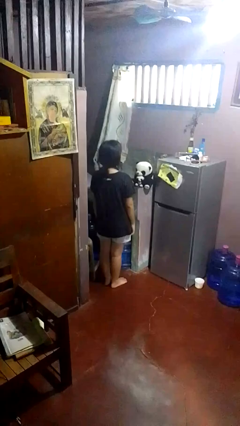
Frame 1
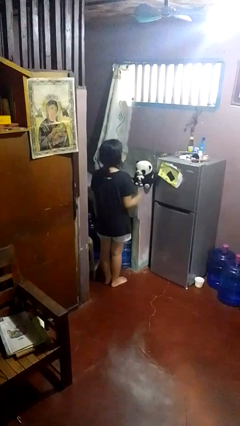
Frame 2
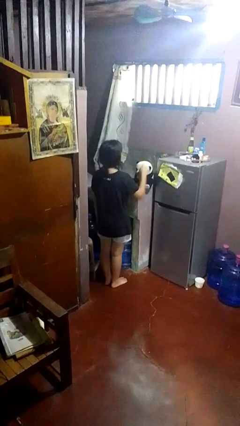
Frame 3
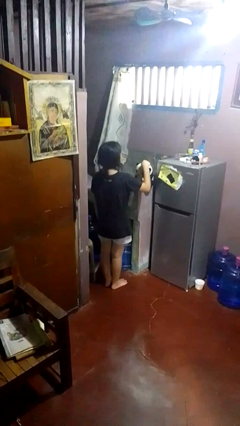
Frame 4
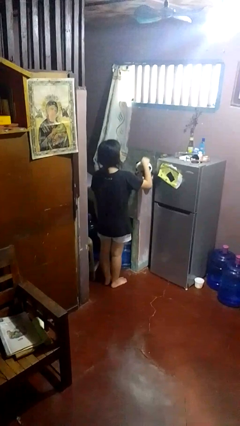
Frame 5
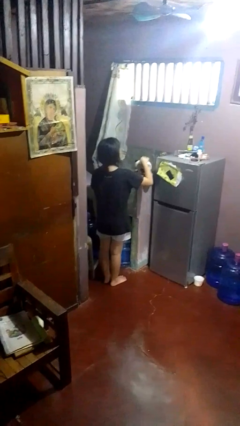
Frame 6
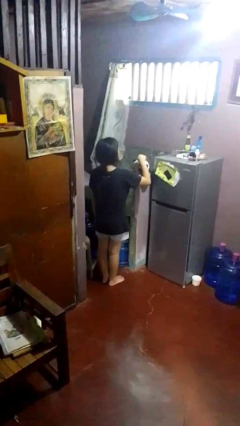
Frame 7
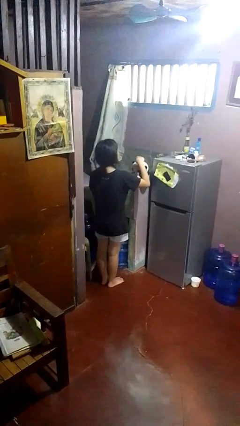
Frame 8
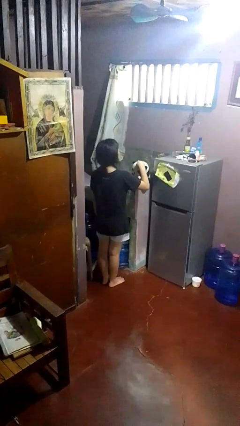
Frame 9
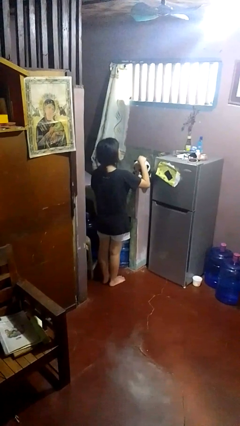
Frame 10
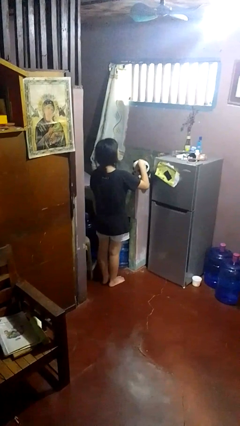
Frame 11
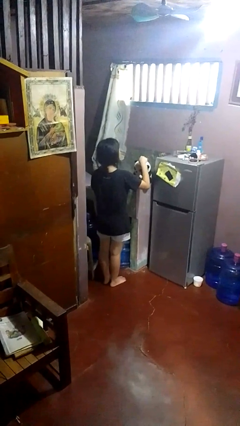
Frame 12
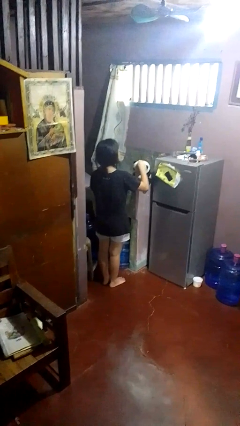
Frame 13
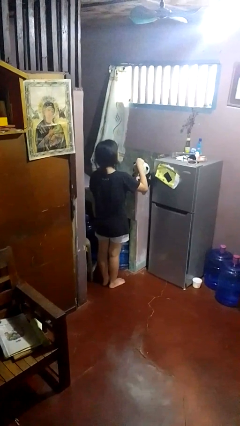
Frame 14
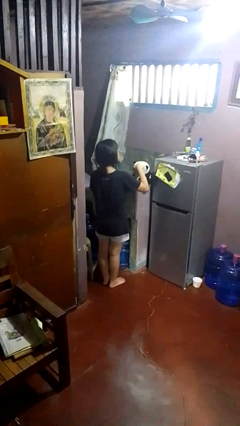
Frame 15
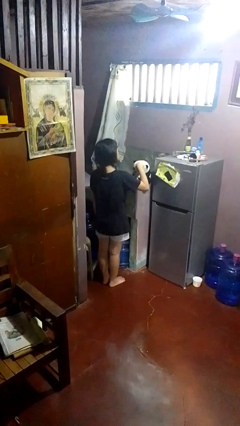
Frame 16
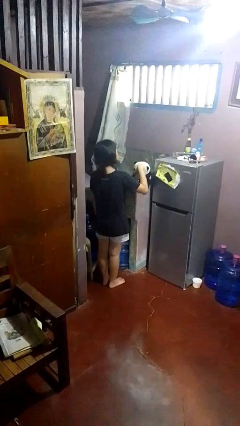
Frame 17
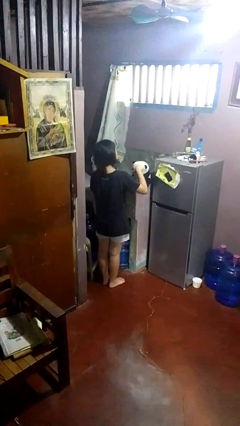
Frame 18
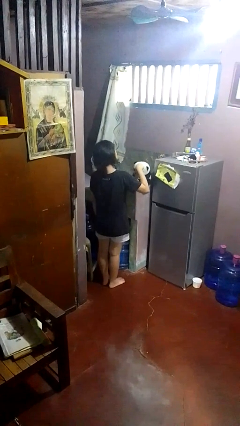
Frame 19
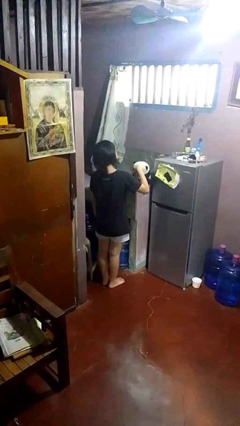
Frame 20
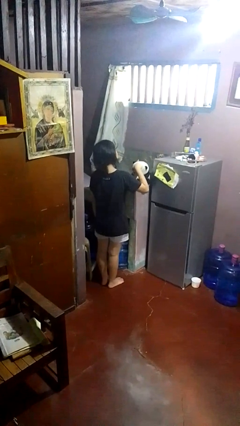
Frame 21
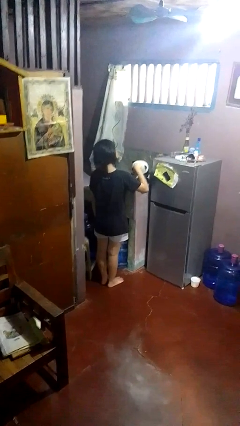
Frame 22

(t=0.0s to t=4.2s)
person taps object with finger

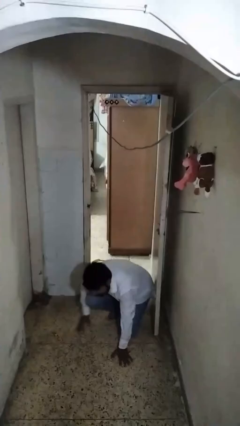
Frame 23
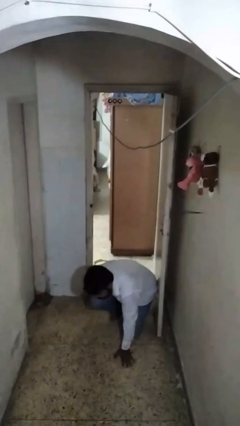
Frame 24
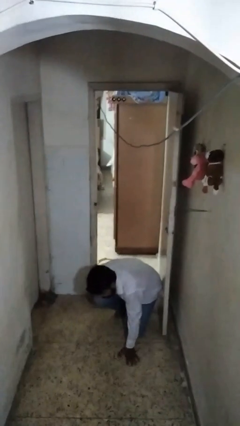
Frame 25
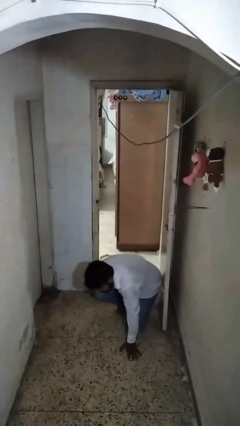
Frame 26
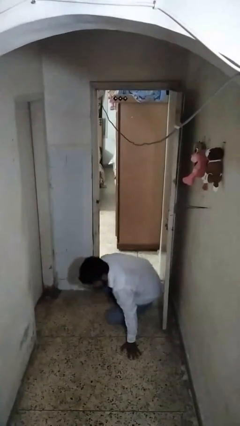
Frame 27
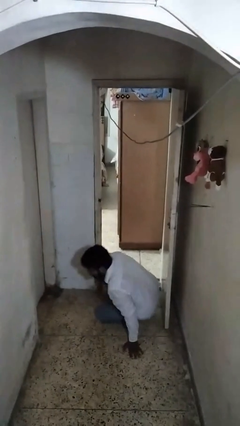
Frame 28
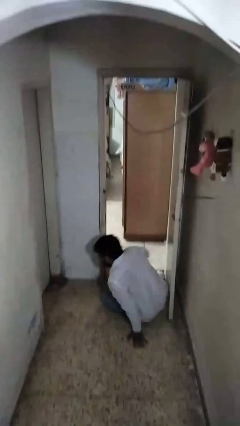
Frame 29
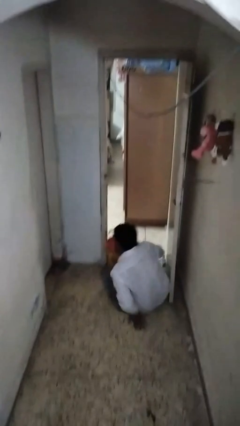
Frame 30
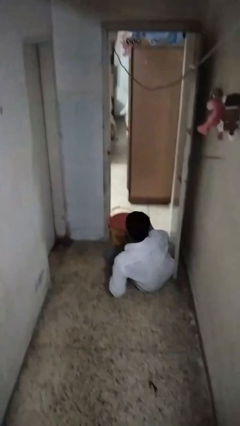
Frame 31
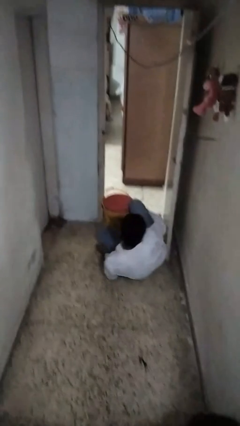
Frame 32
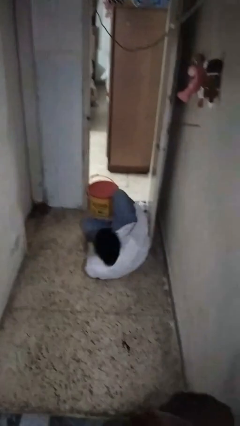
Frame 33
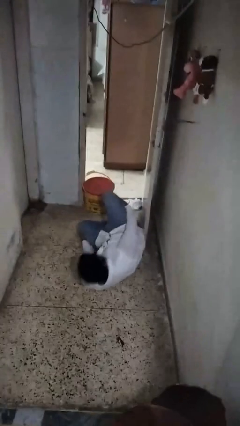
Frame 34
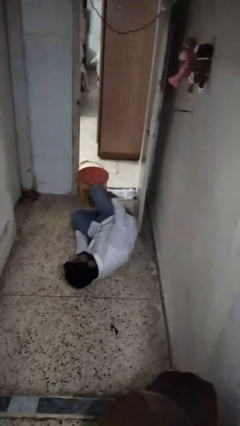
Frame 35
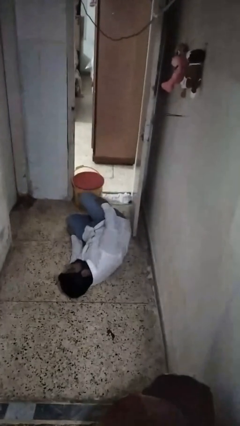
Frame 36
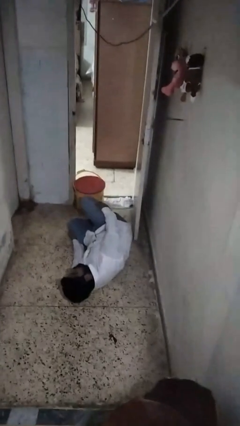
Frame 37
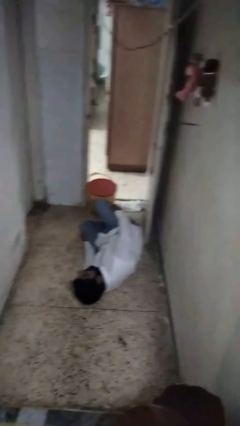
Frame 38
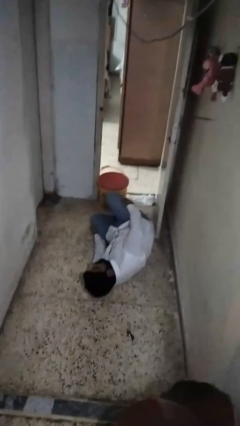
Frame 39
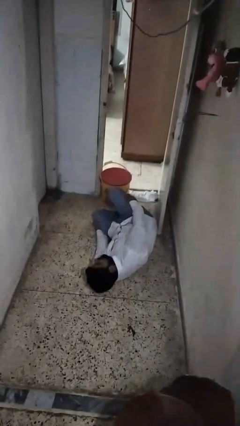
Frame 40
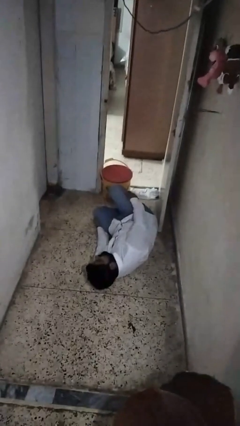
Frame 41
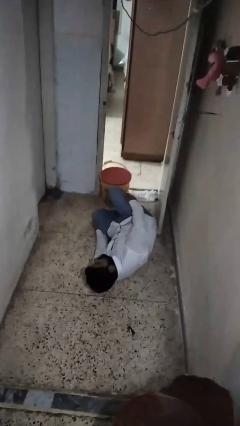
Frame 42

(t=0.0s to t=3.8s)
person lies down on floor

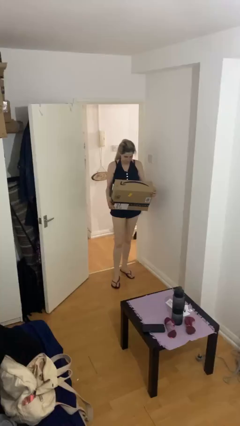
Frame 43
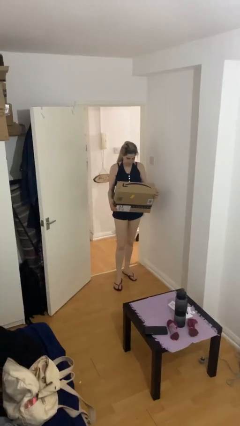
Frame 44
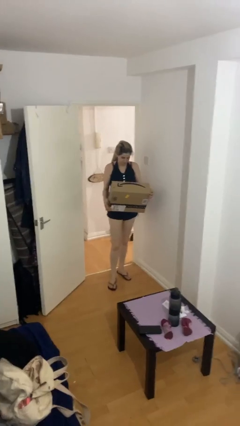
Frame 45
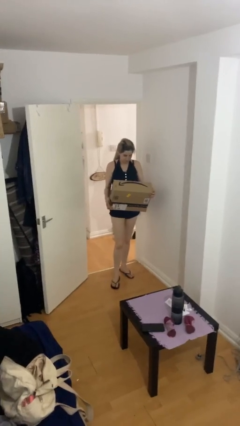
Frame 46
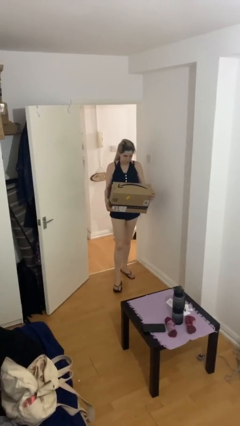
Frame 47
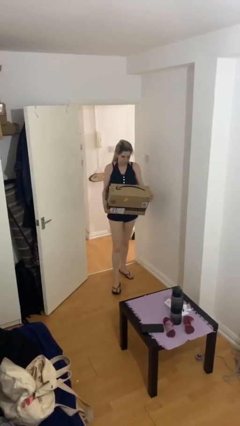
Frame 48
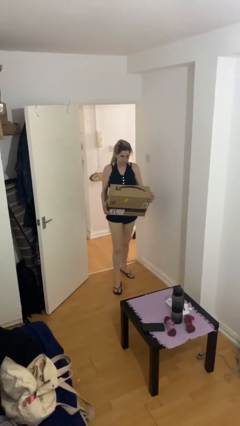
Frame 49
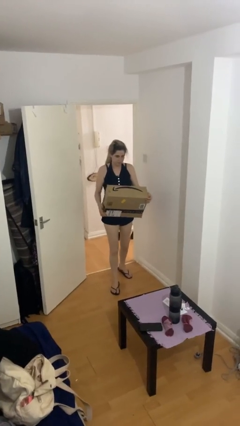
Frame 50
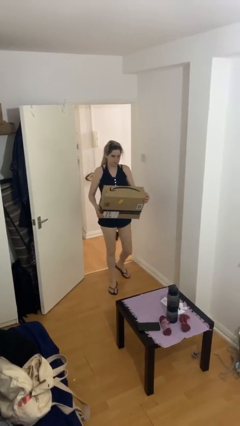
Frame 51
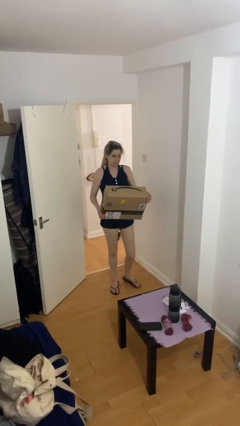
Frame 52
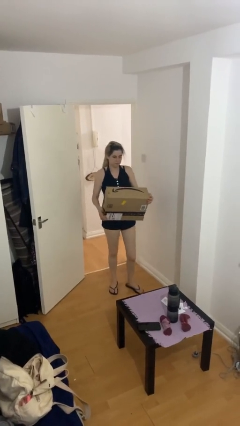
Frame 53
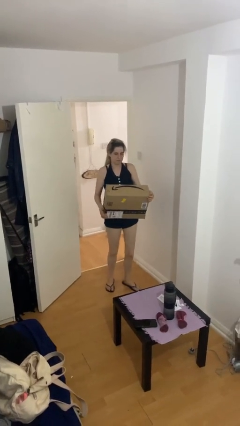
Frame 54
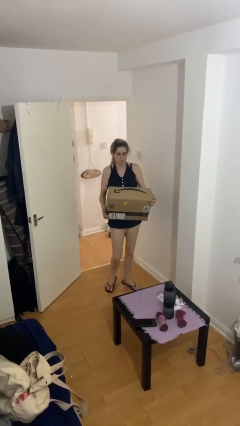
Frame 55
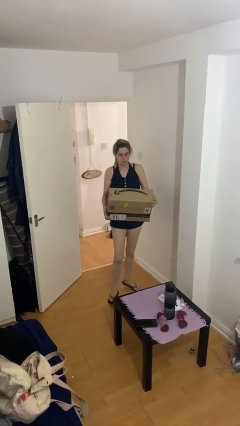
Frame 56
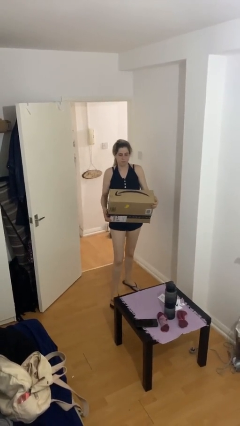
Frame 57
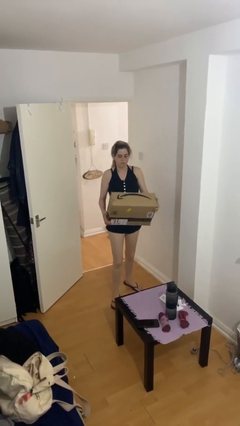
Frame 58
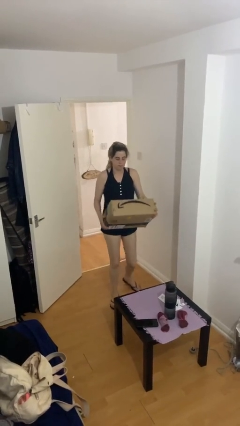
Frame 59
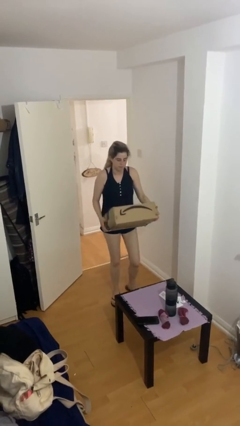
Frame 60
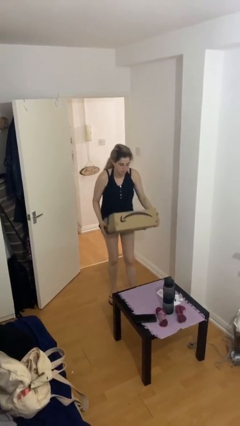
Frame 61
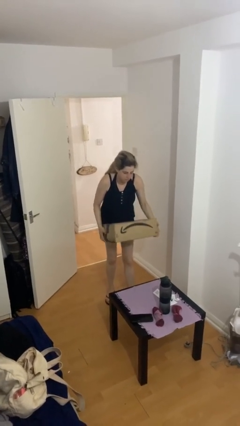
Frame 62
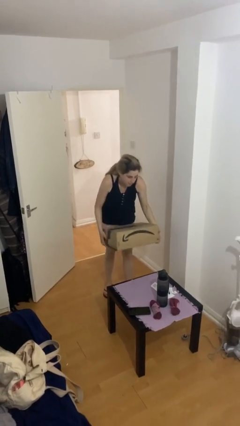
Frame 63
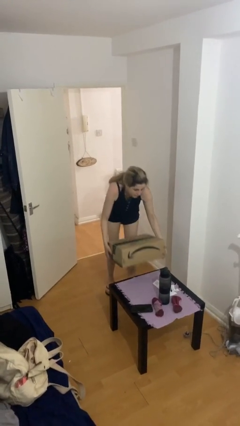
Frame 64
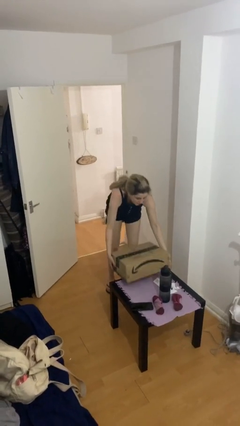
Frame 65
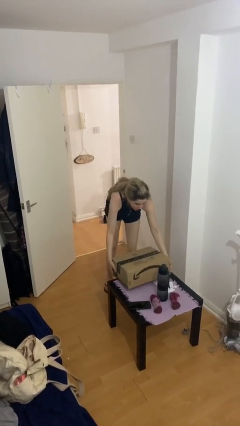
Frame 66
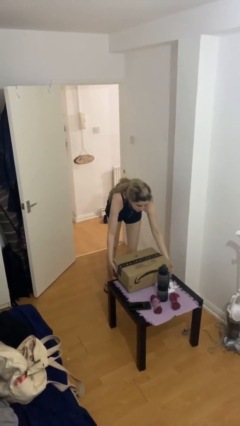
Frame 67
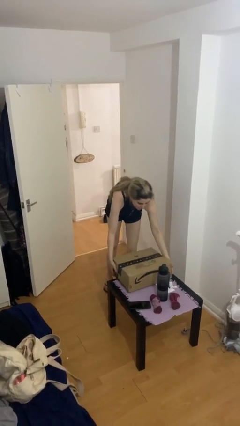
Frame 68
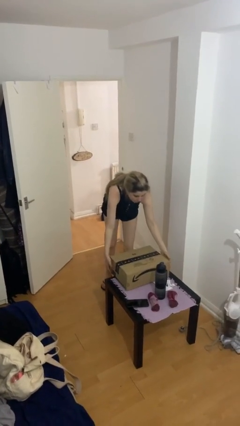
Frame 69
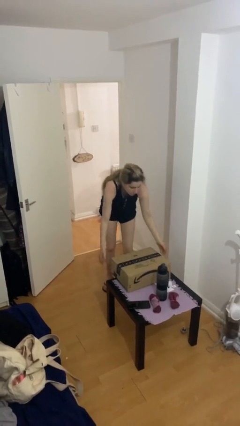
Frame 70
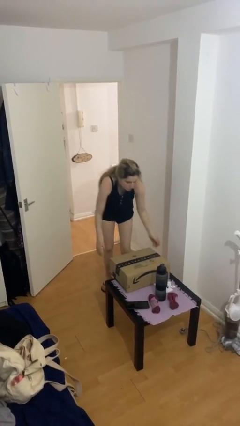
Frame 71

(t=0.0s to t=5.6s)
person puts down object on table

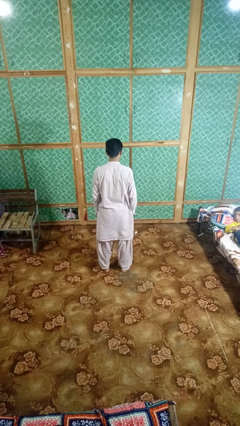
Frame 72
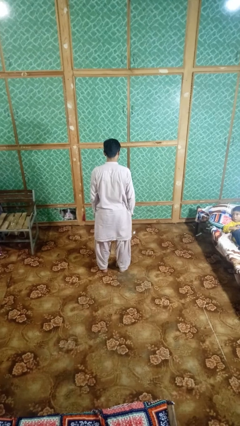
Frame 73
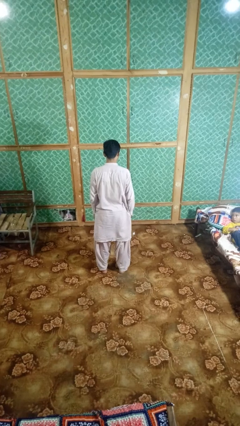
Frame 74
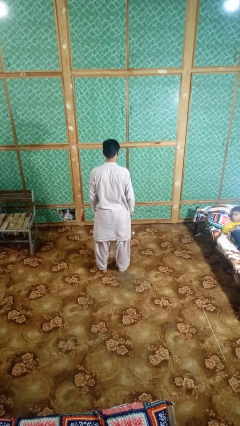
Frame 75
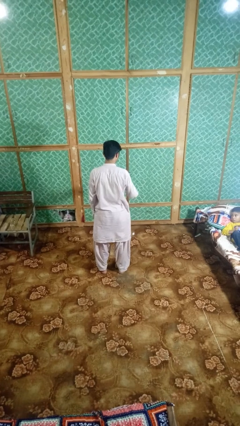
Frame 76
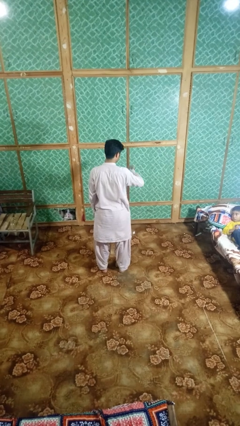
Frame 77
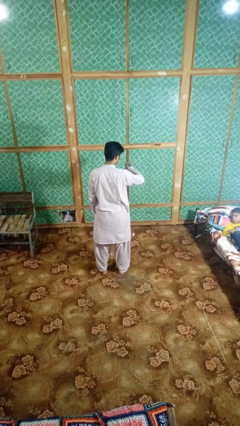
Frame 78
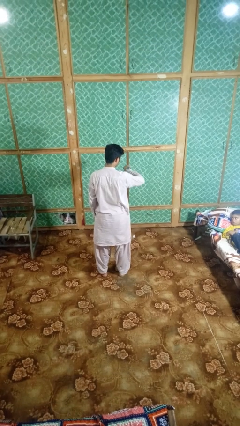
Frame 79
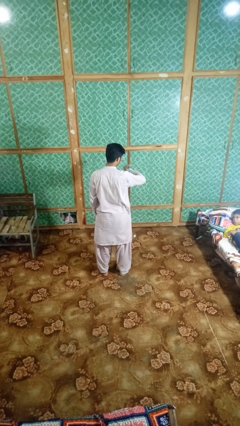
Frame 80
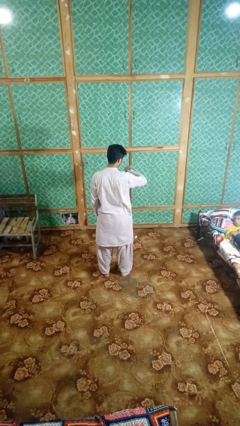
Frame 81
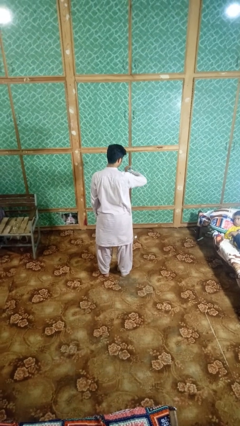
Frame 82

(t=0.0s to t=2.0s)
person looks at wristwatch

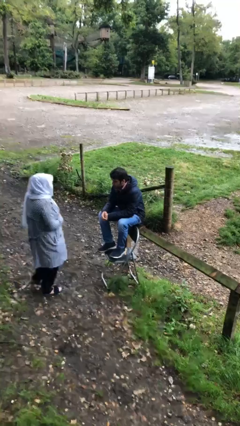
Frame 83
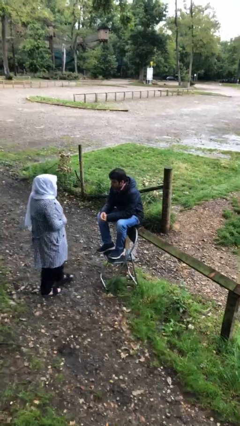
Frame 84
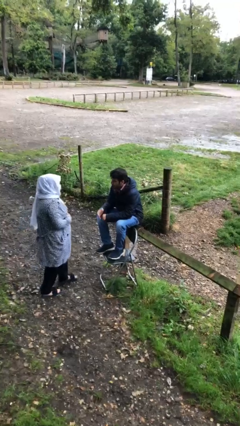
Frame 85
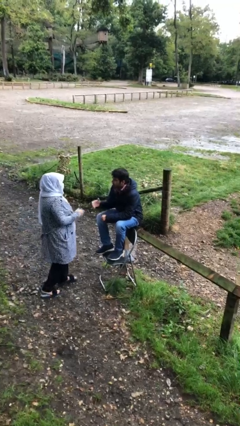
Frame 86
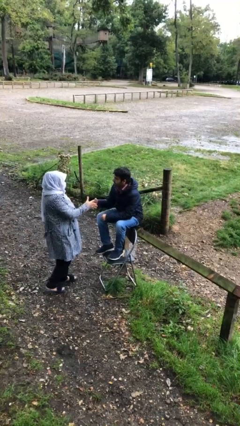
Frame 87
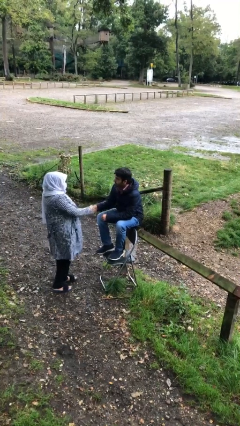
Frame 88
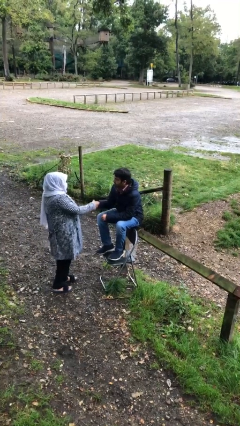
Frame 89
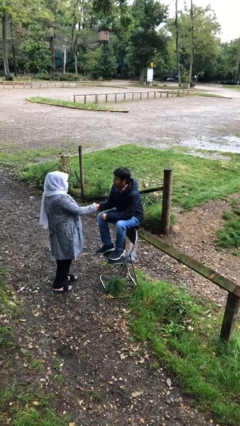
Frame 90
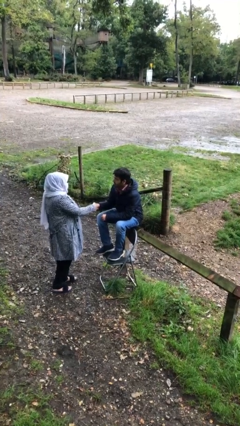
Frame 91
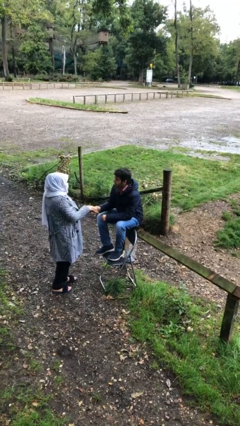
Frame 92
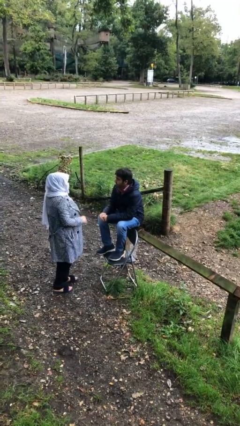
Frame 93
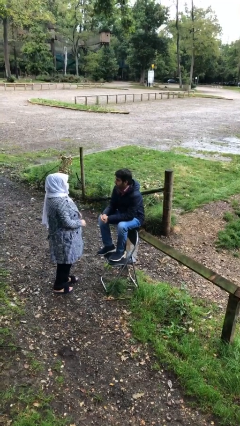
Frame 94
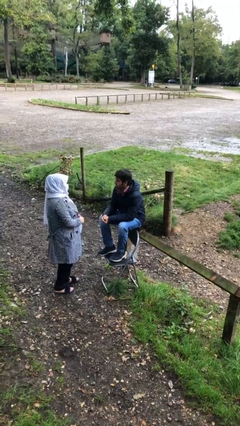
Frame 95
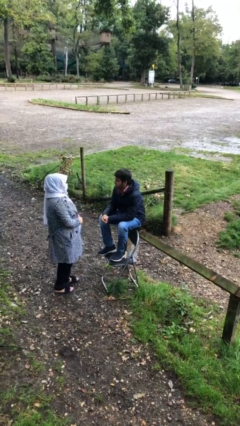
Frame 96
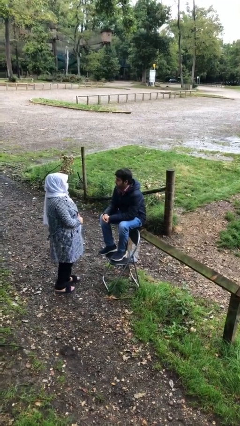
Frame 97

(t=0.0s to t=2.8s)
person shakes hand
